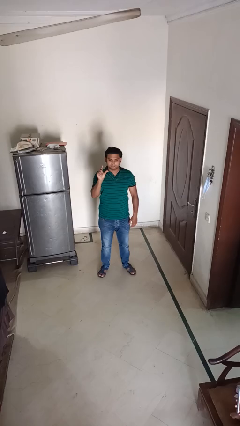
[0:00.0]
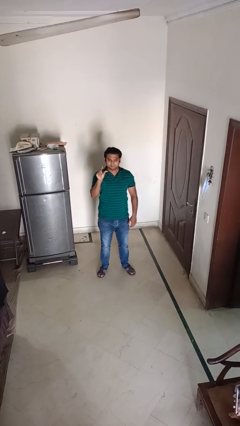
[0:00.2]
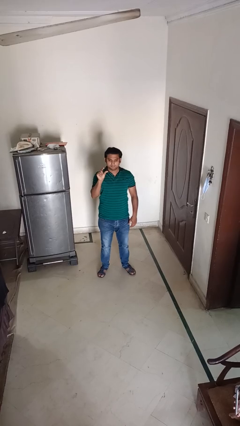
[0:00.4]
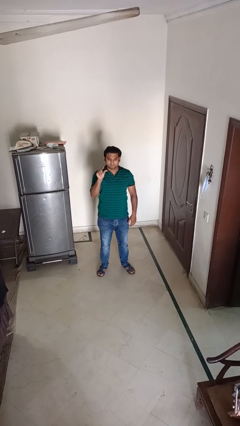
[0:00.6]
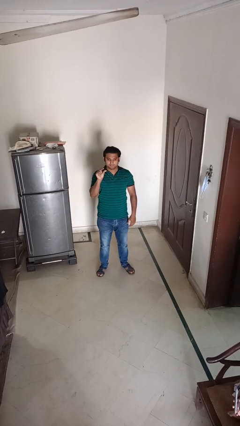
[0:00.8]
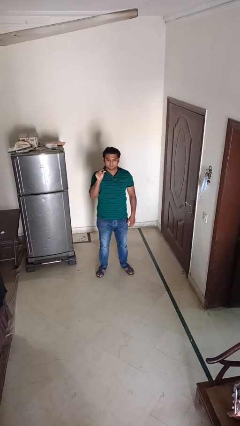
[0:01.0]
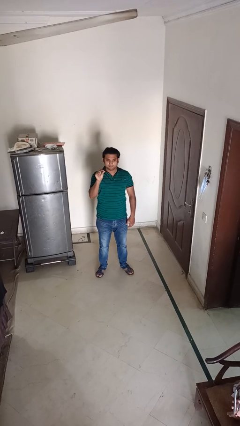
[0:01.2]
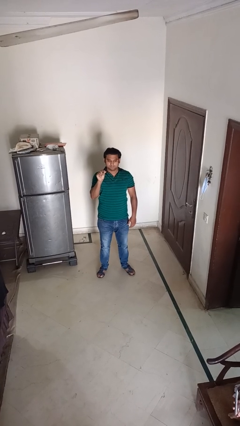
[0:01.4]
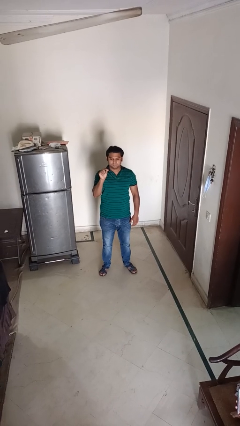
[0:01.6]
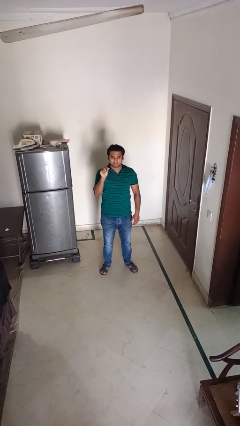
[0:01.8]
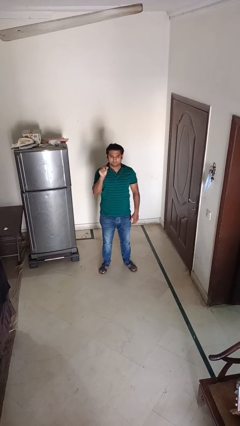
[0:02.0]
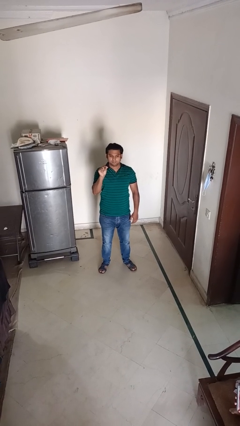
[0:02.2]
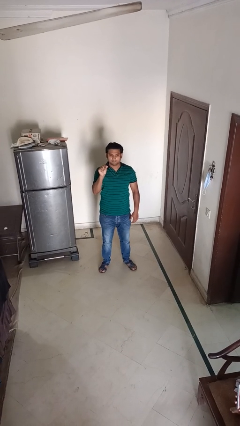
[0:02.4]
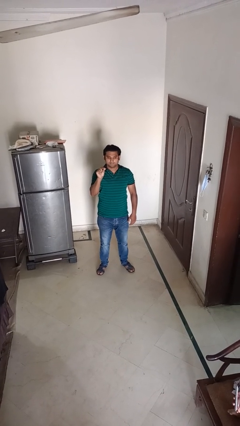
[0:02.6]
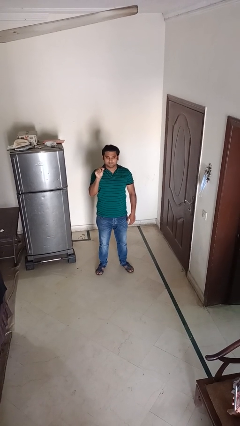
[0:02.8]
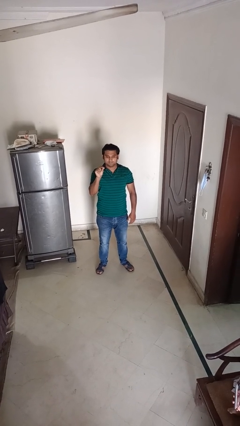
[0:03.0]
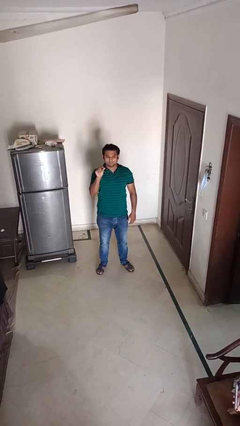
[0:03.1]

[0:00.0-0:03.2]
person gestures zoom in

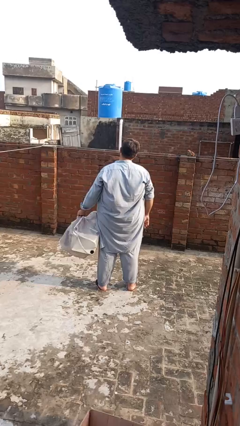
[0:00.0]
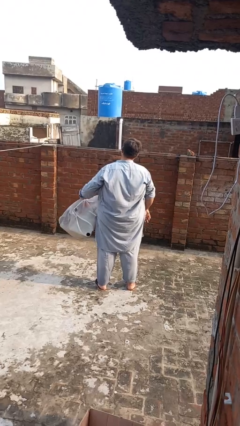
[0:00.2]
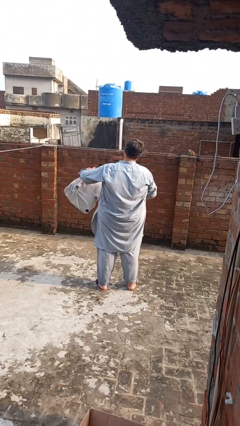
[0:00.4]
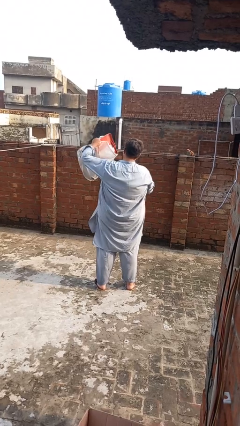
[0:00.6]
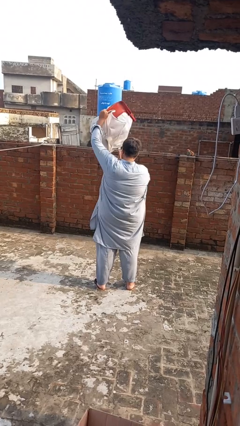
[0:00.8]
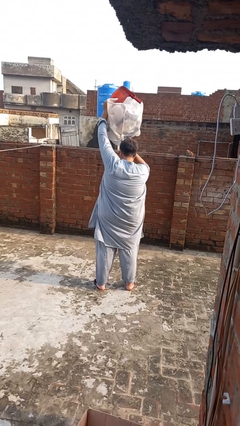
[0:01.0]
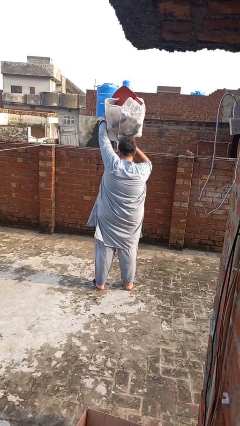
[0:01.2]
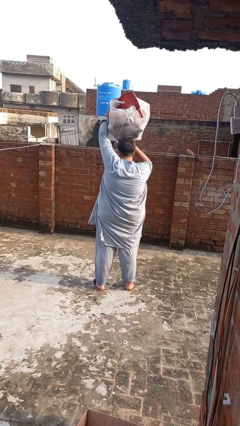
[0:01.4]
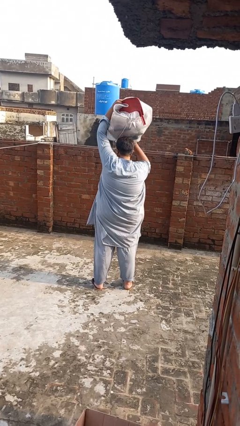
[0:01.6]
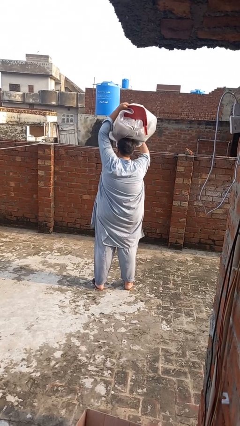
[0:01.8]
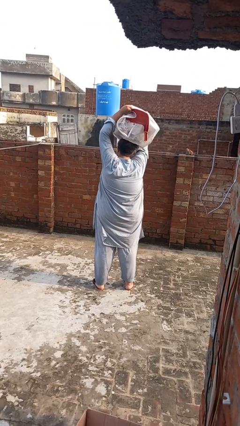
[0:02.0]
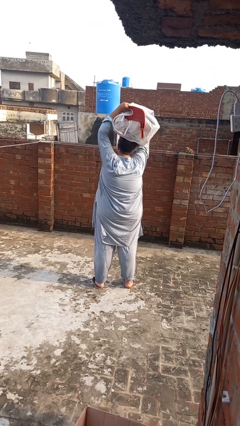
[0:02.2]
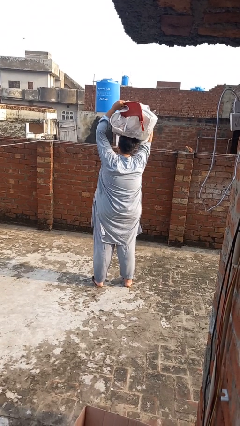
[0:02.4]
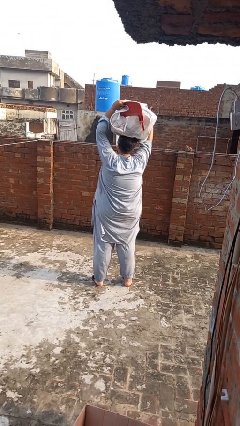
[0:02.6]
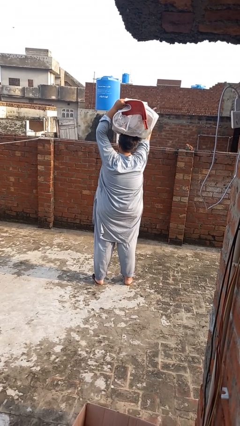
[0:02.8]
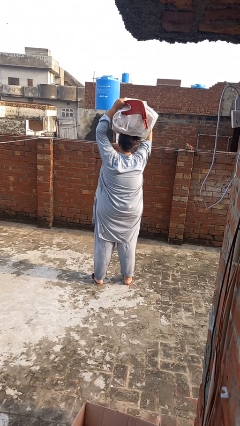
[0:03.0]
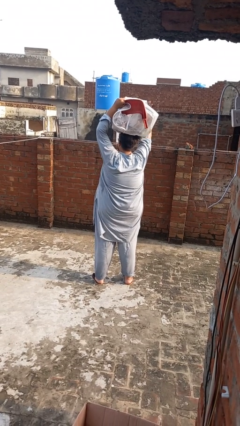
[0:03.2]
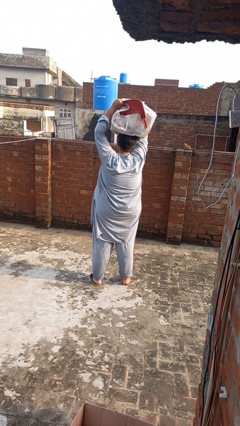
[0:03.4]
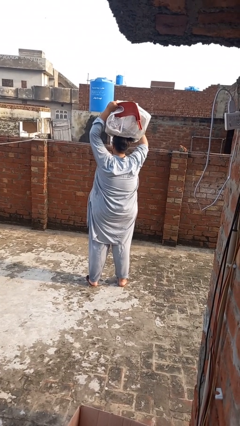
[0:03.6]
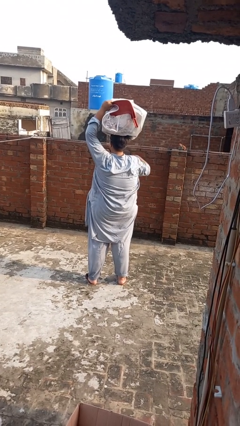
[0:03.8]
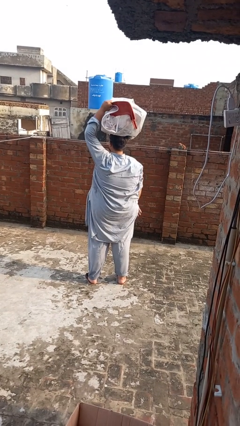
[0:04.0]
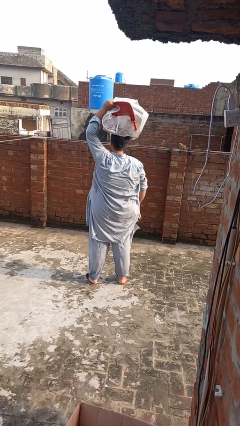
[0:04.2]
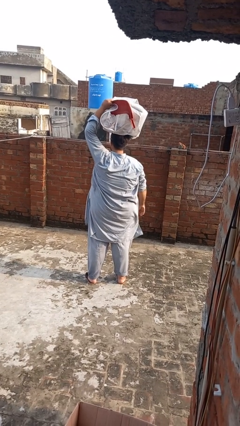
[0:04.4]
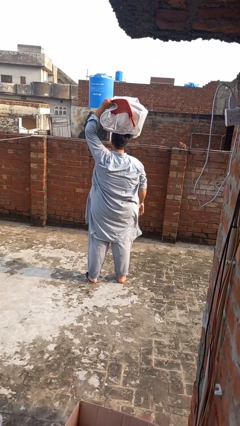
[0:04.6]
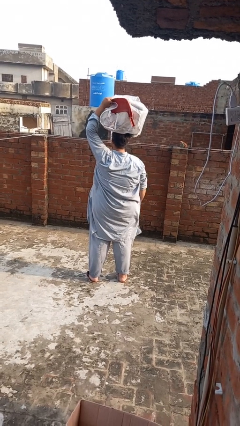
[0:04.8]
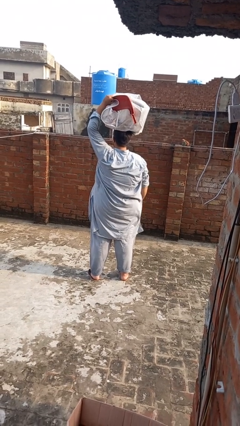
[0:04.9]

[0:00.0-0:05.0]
person holds object above head

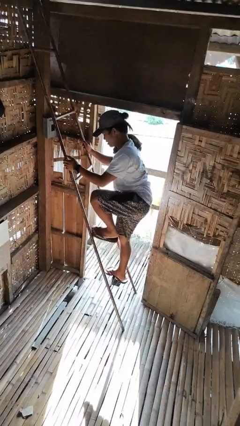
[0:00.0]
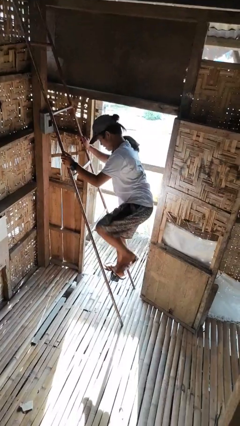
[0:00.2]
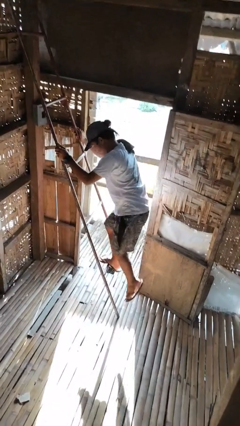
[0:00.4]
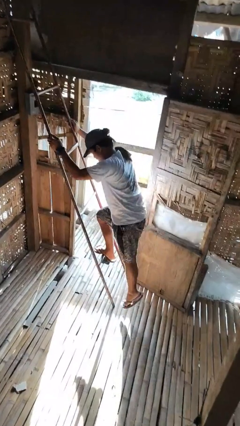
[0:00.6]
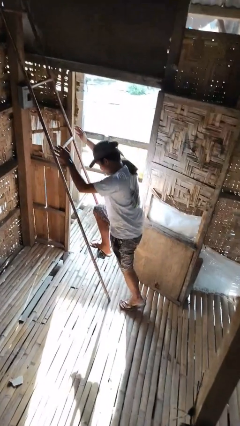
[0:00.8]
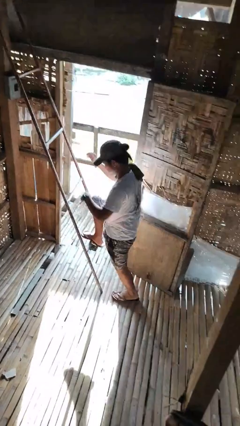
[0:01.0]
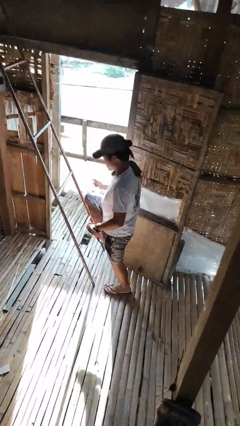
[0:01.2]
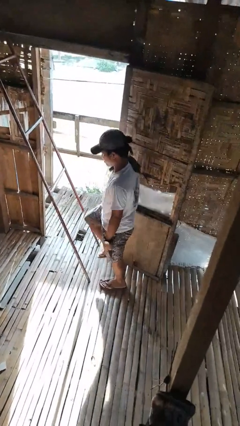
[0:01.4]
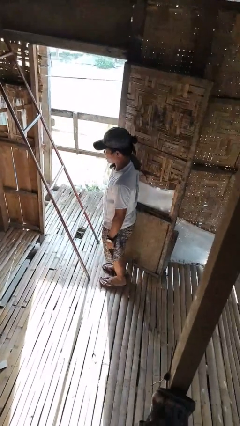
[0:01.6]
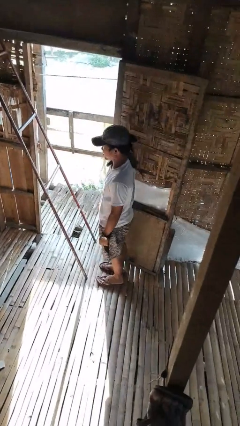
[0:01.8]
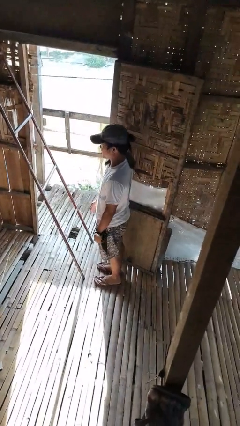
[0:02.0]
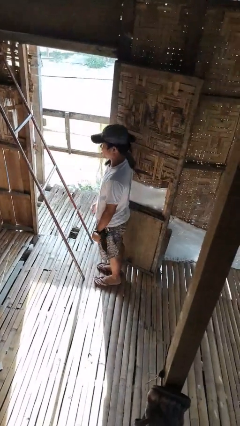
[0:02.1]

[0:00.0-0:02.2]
person climbs down ladder

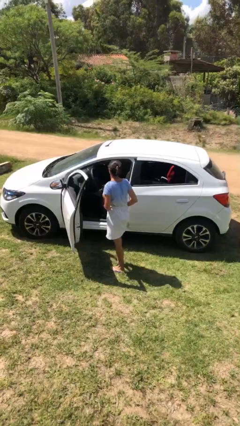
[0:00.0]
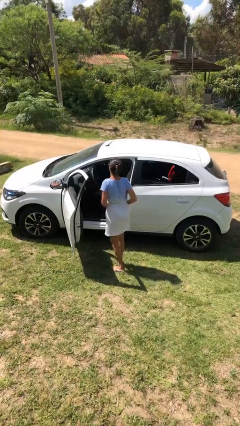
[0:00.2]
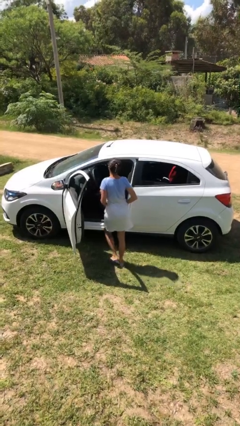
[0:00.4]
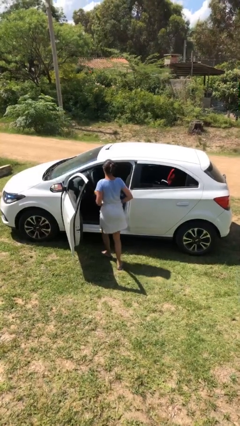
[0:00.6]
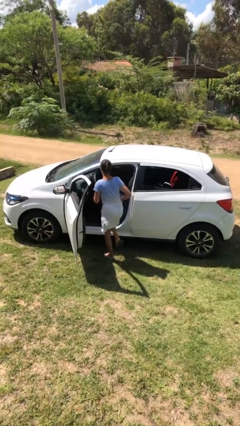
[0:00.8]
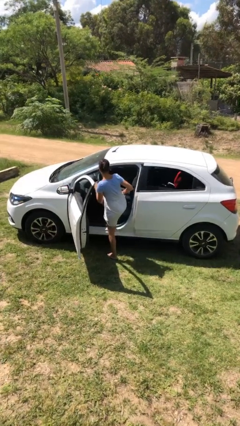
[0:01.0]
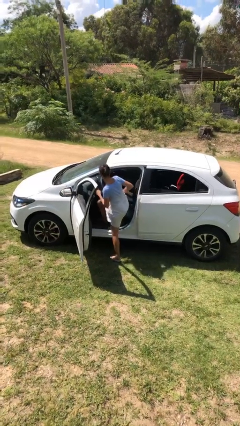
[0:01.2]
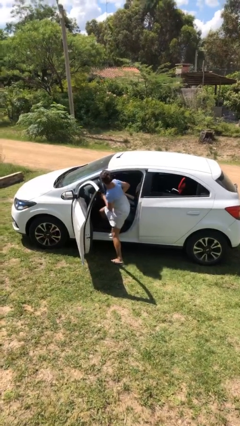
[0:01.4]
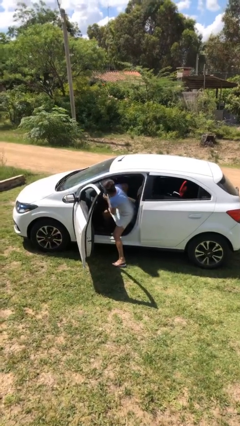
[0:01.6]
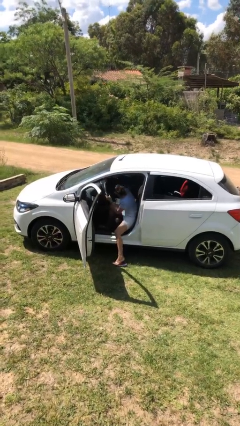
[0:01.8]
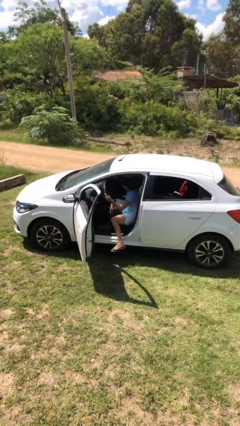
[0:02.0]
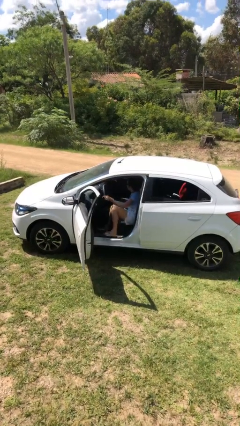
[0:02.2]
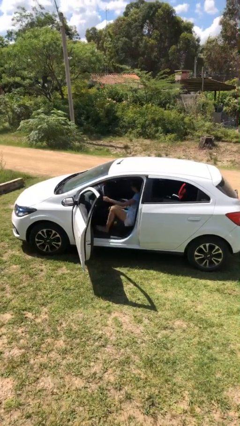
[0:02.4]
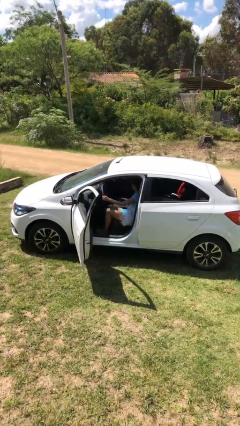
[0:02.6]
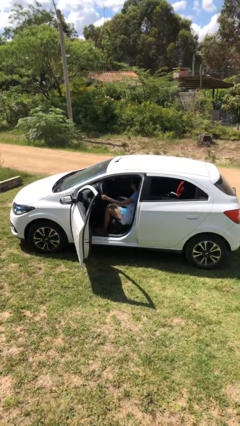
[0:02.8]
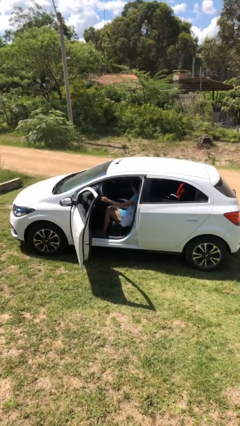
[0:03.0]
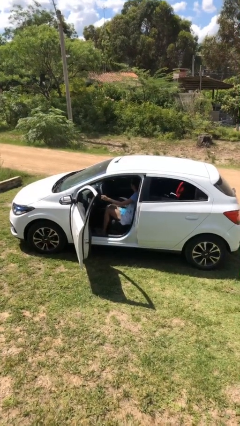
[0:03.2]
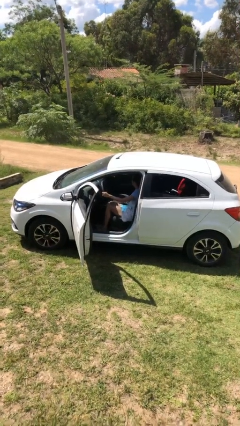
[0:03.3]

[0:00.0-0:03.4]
person enters car

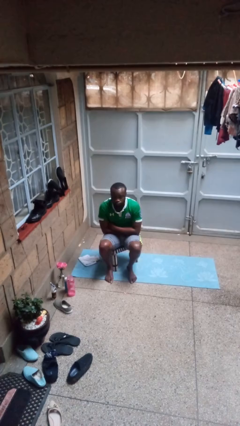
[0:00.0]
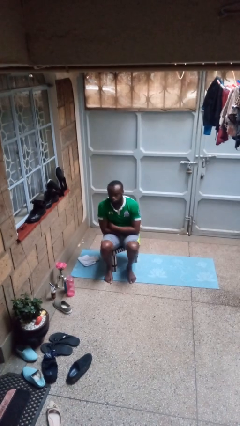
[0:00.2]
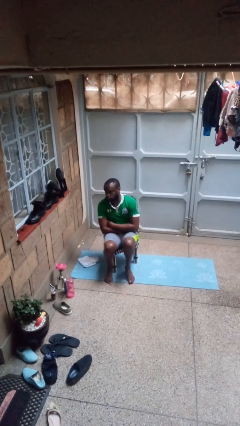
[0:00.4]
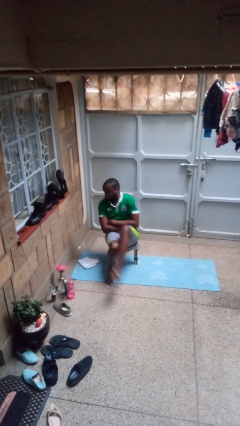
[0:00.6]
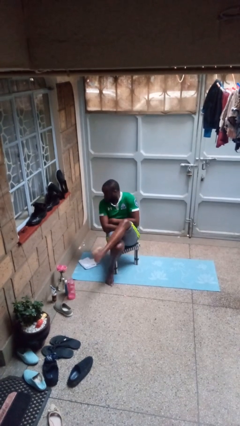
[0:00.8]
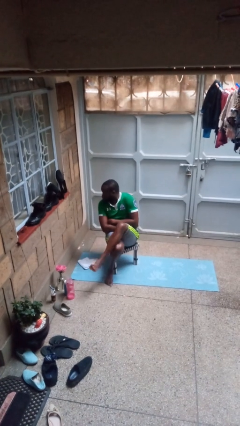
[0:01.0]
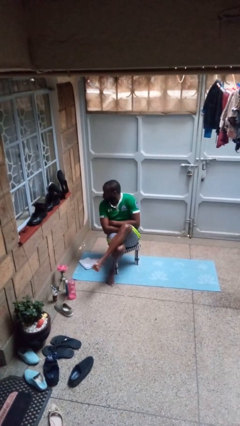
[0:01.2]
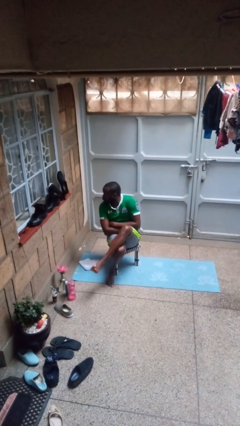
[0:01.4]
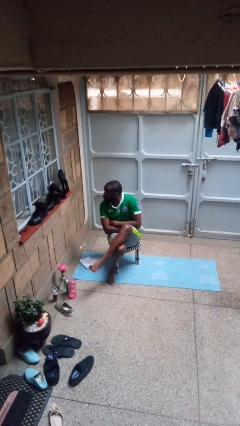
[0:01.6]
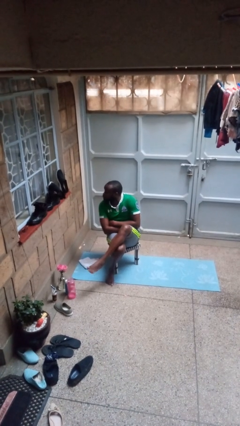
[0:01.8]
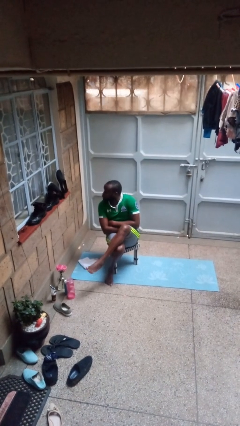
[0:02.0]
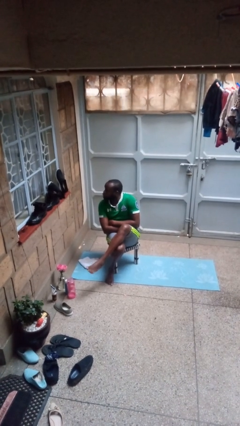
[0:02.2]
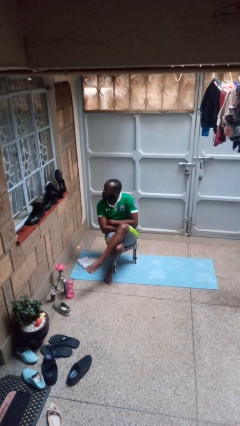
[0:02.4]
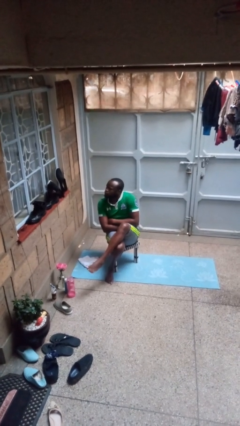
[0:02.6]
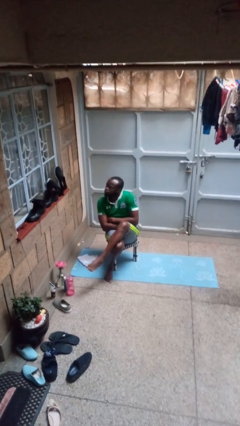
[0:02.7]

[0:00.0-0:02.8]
person crosses legs

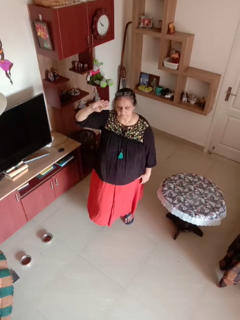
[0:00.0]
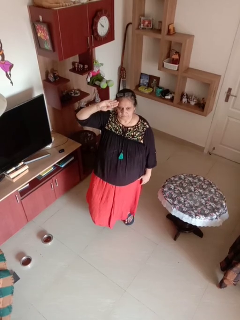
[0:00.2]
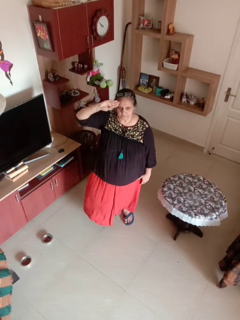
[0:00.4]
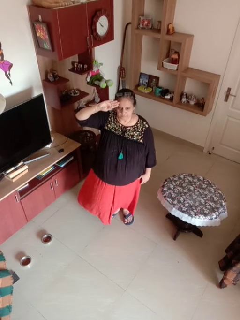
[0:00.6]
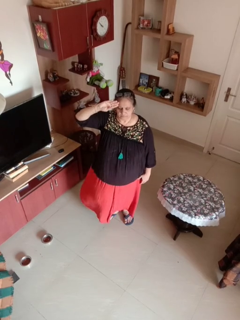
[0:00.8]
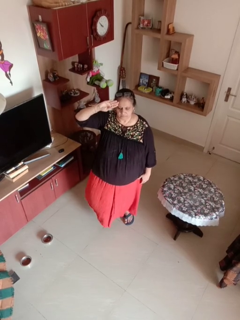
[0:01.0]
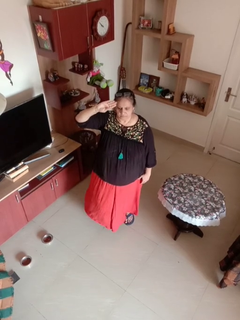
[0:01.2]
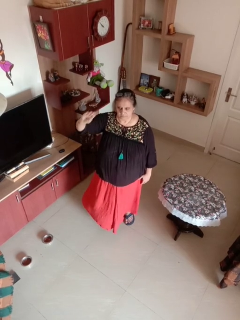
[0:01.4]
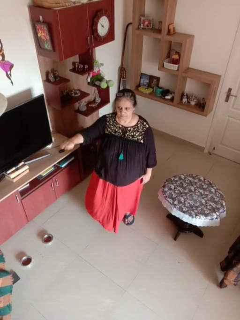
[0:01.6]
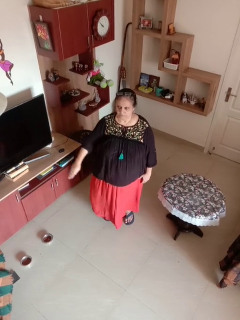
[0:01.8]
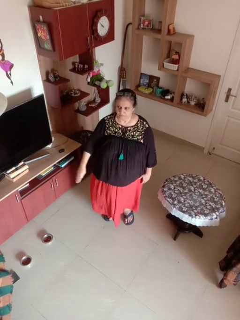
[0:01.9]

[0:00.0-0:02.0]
person salutes
